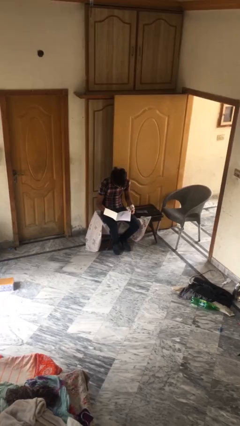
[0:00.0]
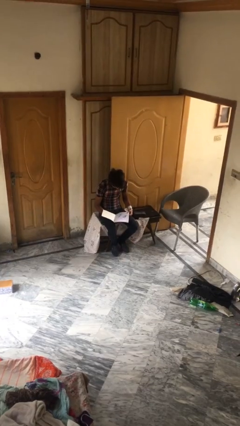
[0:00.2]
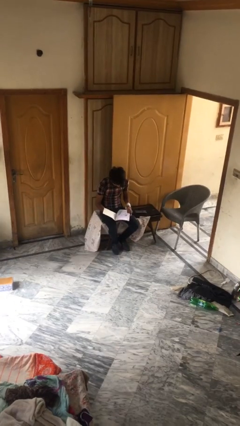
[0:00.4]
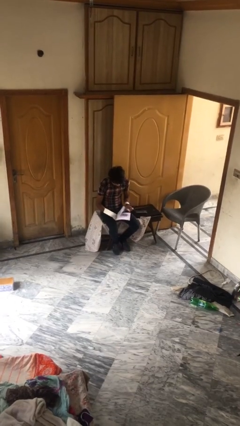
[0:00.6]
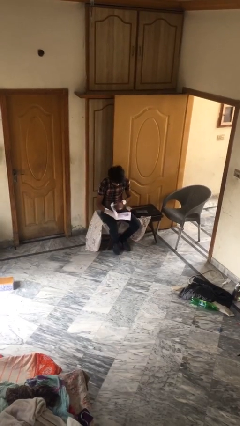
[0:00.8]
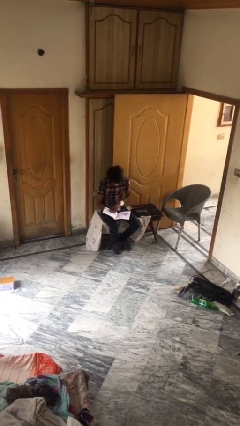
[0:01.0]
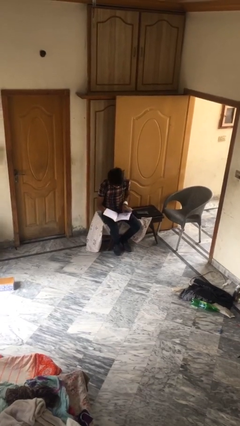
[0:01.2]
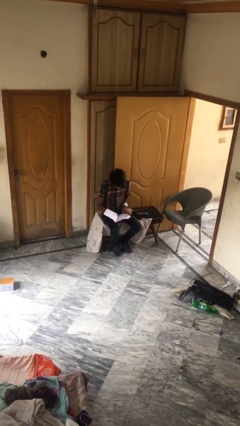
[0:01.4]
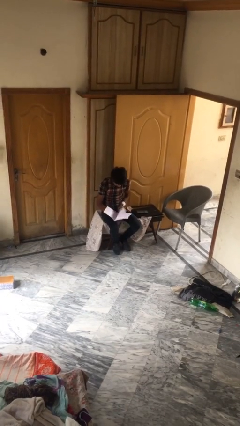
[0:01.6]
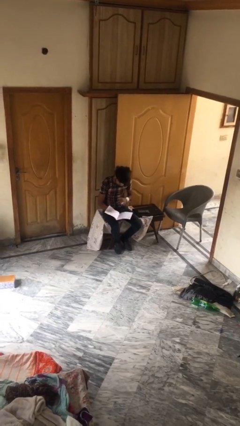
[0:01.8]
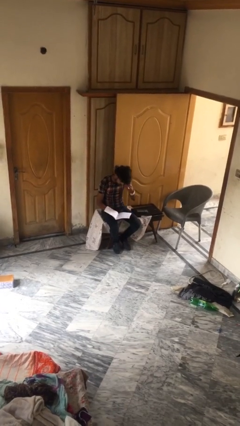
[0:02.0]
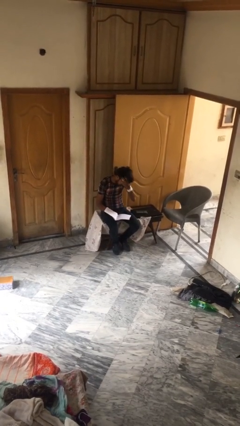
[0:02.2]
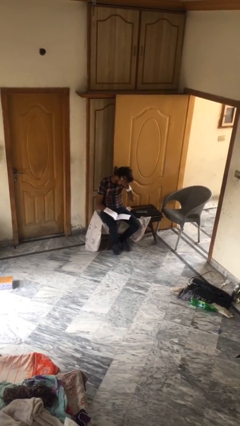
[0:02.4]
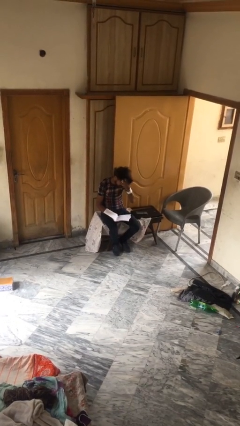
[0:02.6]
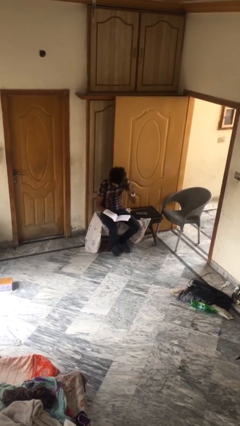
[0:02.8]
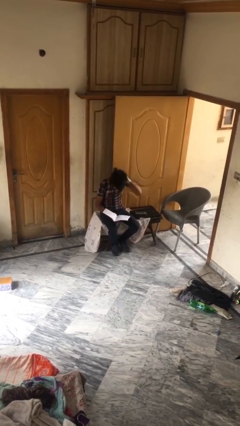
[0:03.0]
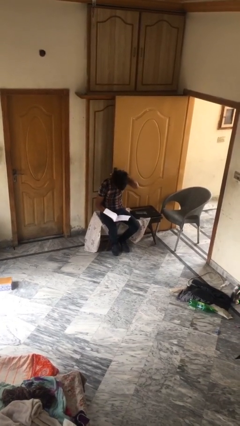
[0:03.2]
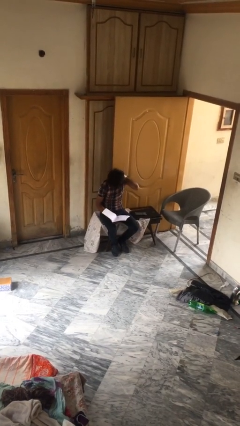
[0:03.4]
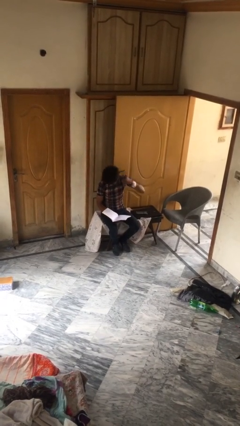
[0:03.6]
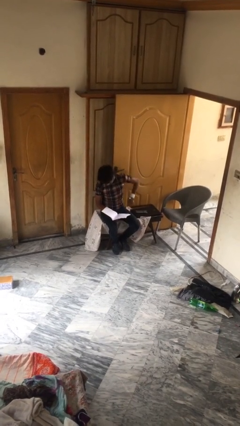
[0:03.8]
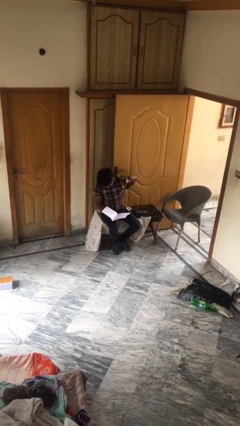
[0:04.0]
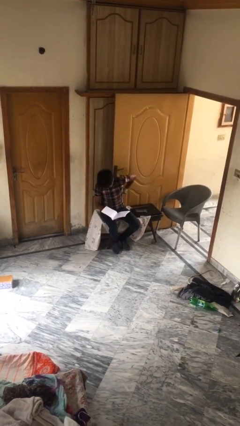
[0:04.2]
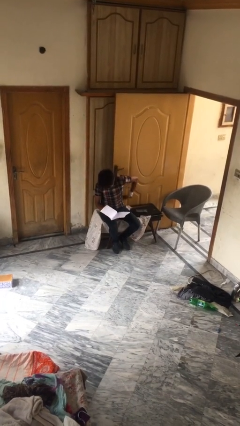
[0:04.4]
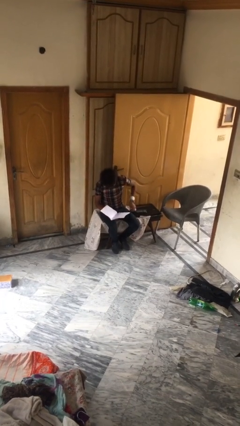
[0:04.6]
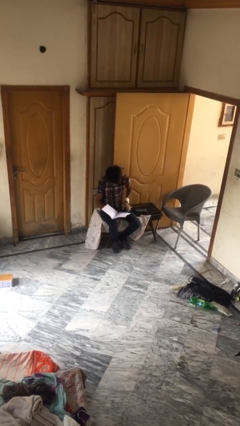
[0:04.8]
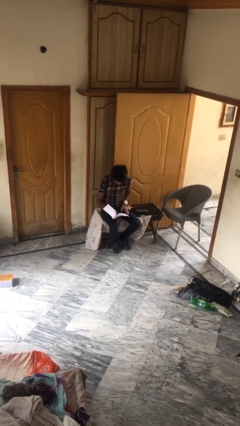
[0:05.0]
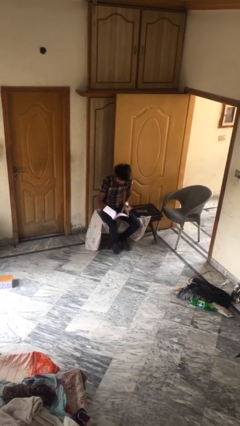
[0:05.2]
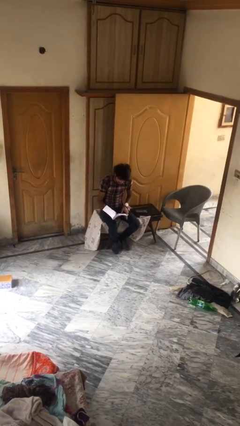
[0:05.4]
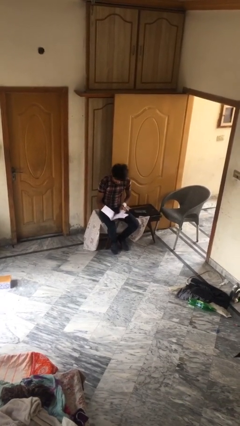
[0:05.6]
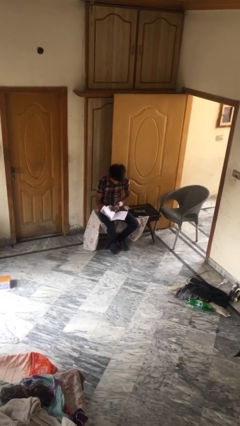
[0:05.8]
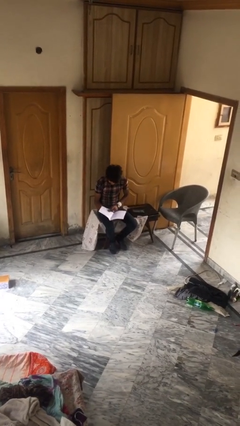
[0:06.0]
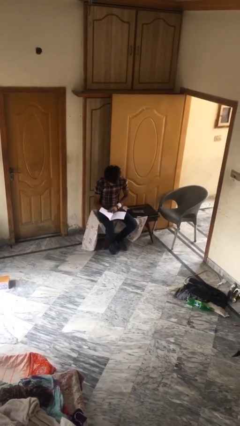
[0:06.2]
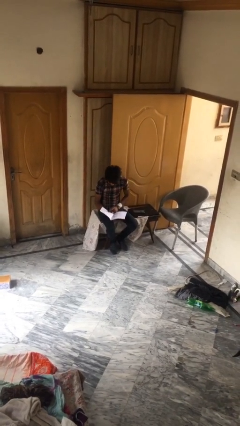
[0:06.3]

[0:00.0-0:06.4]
person reads document

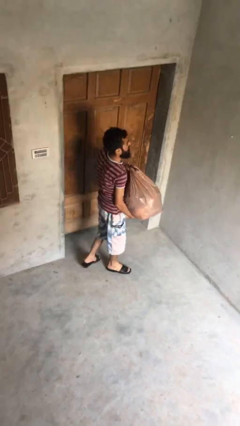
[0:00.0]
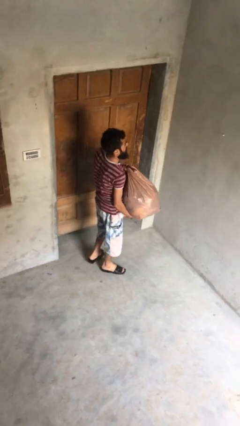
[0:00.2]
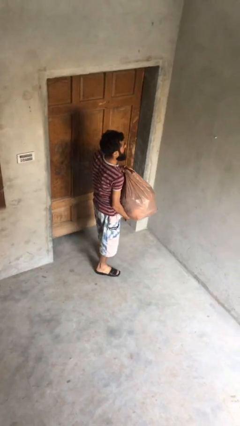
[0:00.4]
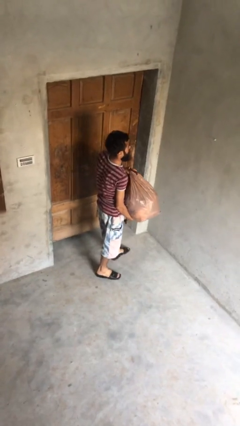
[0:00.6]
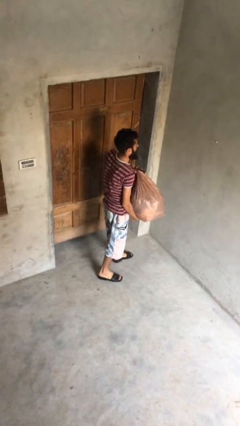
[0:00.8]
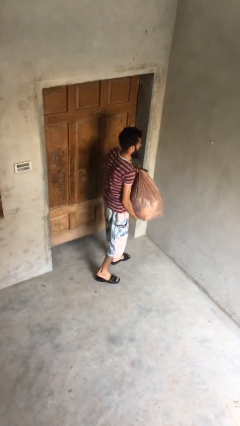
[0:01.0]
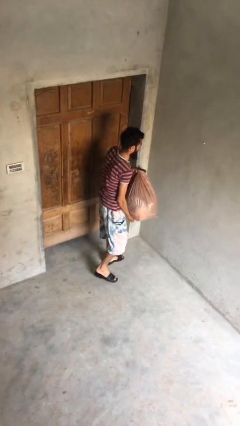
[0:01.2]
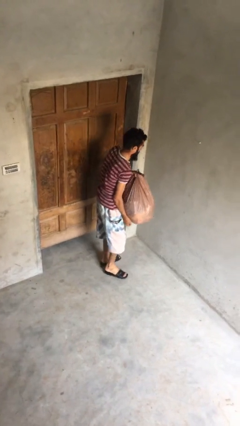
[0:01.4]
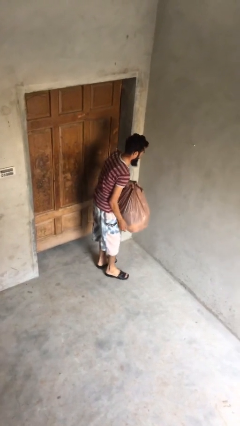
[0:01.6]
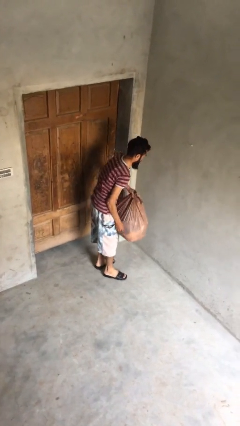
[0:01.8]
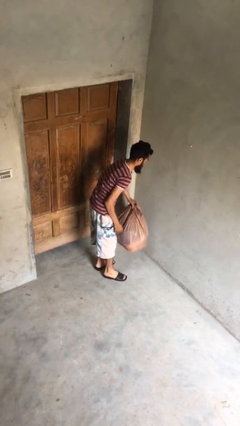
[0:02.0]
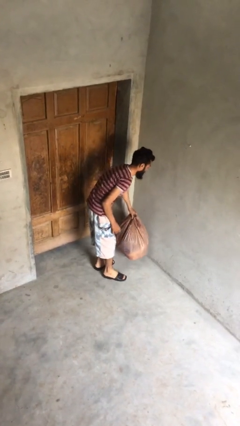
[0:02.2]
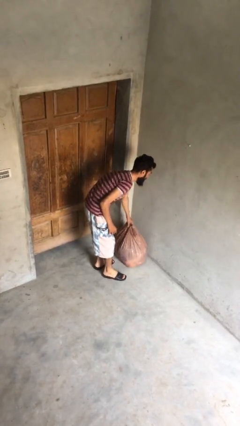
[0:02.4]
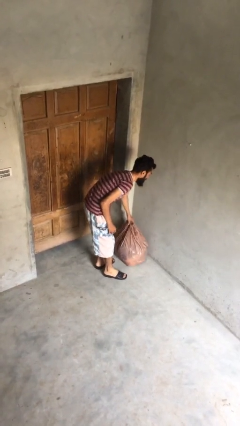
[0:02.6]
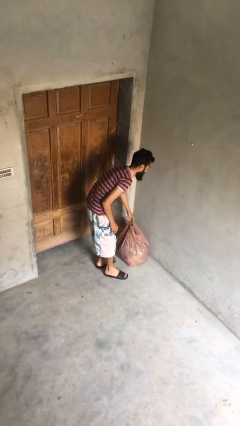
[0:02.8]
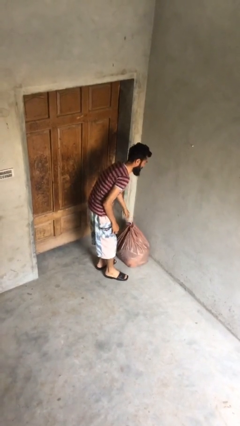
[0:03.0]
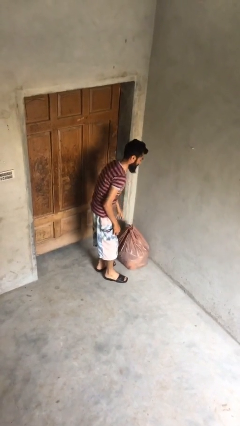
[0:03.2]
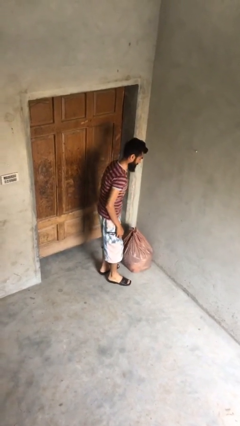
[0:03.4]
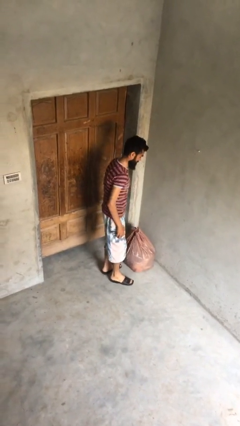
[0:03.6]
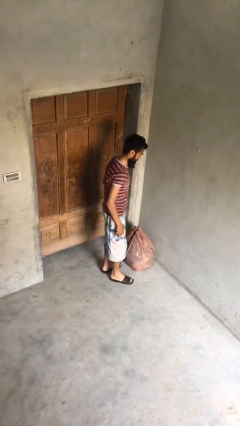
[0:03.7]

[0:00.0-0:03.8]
person puts down object on floor

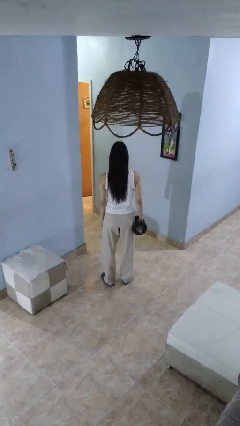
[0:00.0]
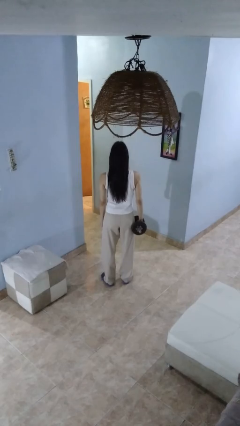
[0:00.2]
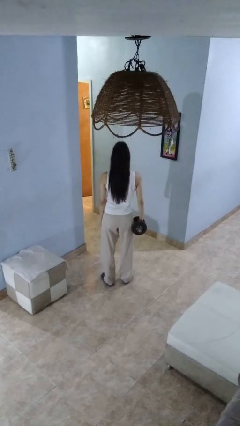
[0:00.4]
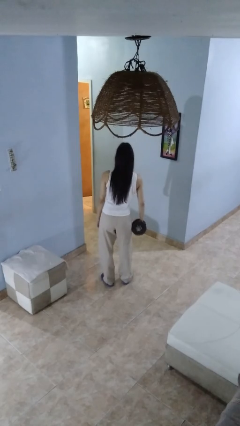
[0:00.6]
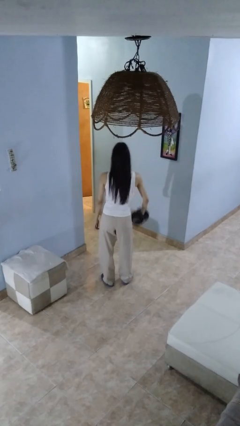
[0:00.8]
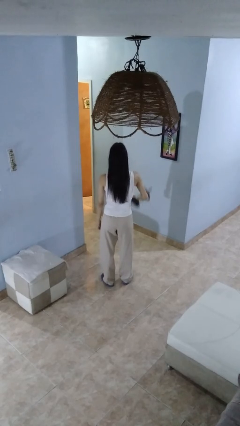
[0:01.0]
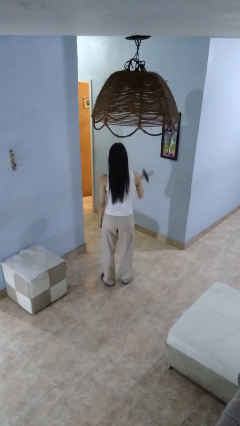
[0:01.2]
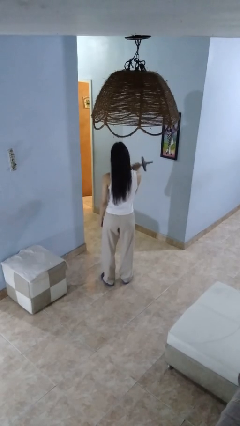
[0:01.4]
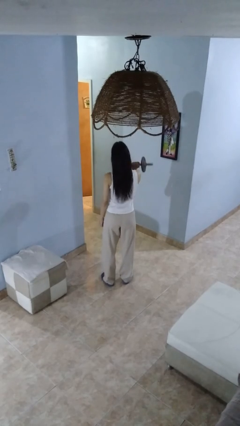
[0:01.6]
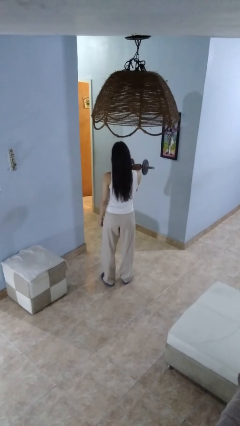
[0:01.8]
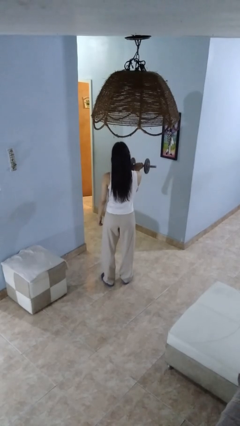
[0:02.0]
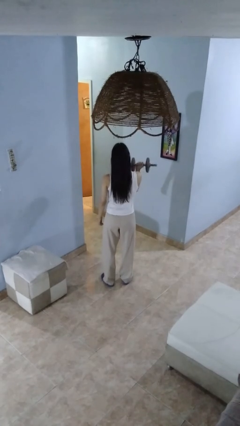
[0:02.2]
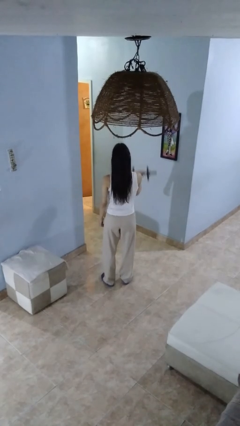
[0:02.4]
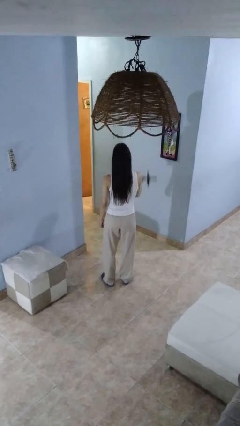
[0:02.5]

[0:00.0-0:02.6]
person lifts dumbbells

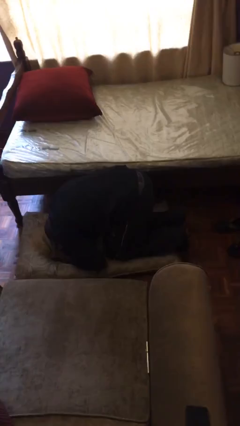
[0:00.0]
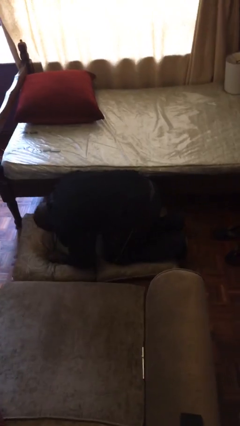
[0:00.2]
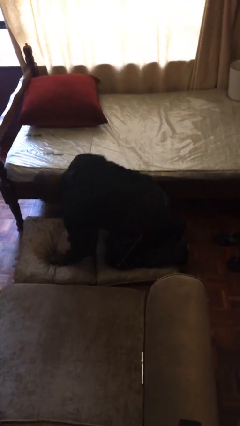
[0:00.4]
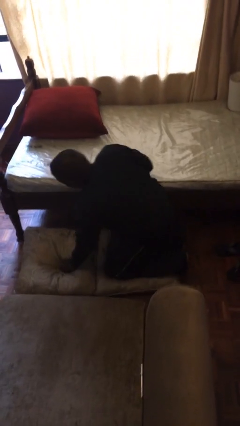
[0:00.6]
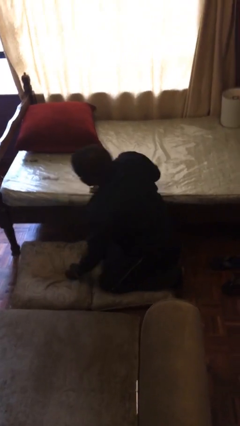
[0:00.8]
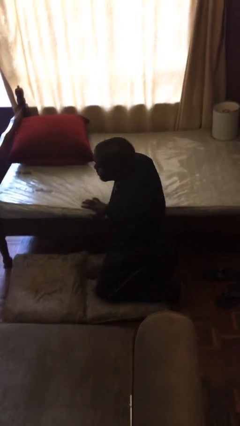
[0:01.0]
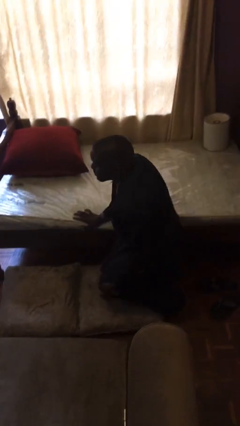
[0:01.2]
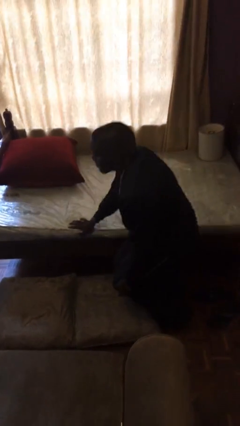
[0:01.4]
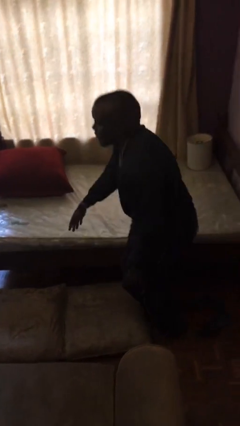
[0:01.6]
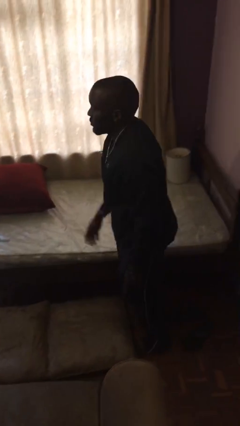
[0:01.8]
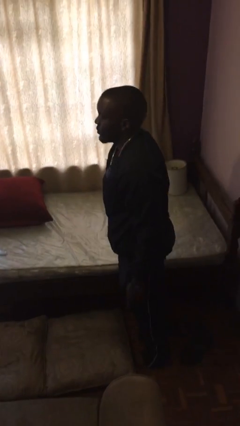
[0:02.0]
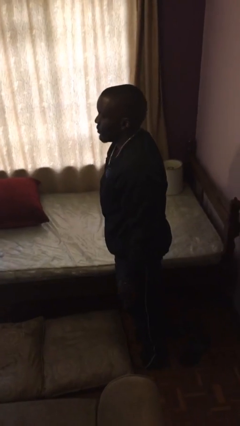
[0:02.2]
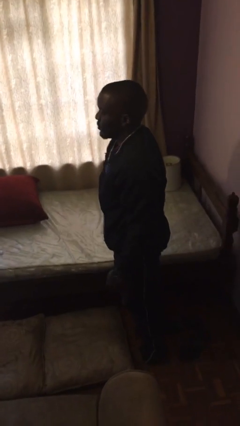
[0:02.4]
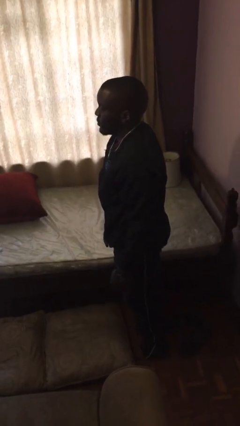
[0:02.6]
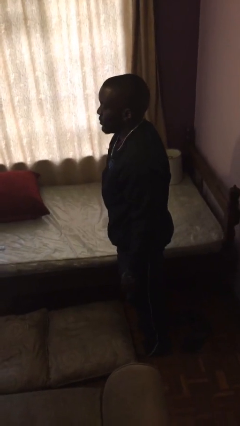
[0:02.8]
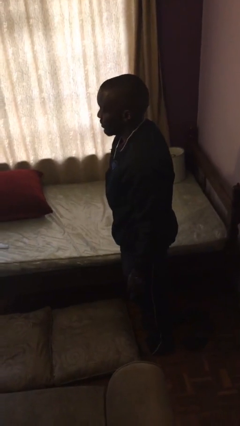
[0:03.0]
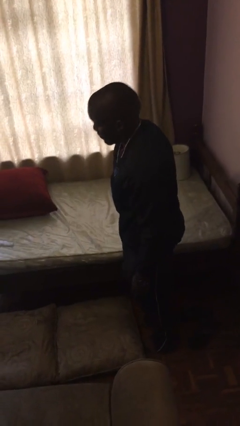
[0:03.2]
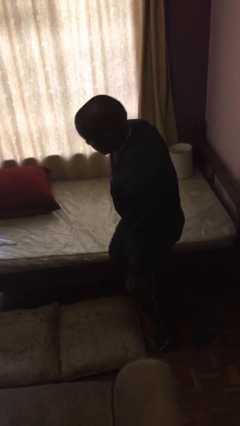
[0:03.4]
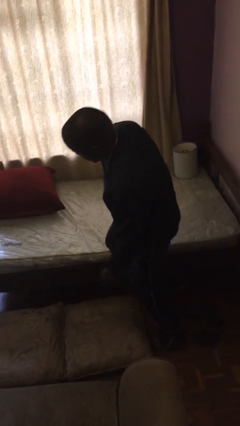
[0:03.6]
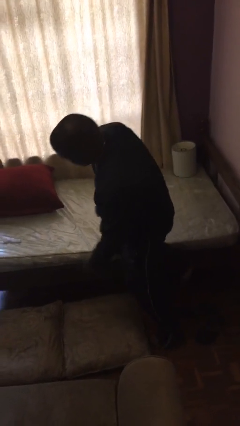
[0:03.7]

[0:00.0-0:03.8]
person stands up from floor

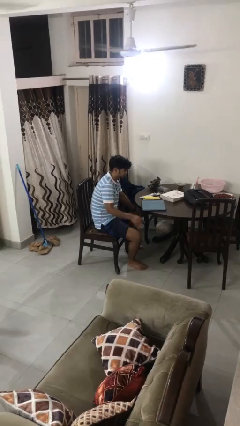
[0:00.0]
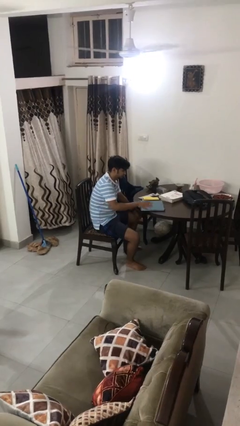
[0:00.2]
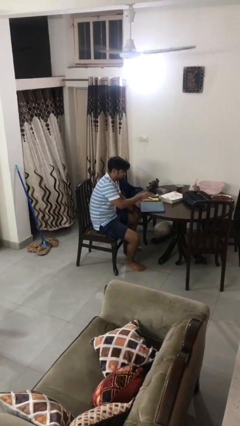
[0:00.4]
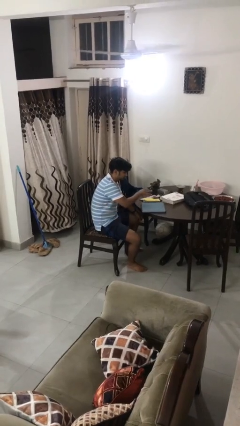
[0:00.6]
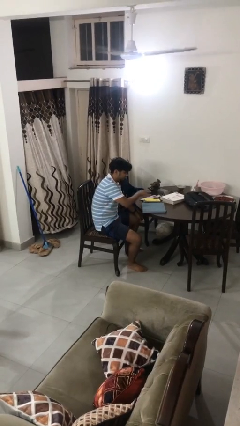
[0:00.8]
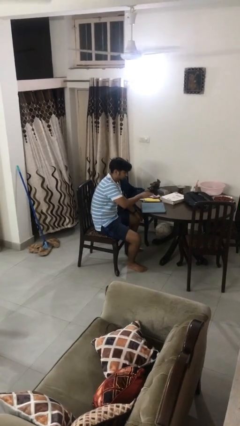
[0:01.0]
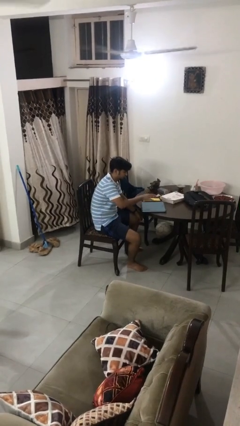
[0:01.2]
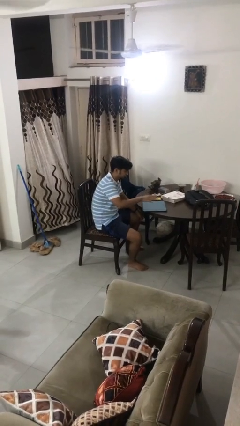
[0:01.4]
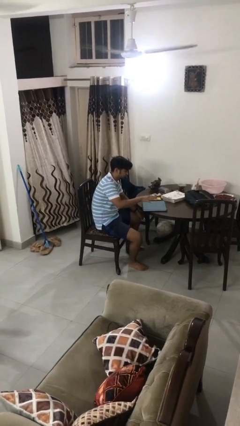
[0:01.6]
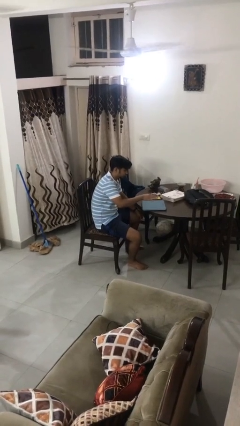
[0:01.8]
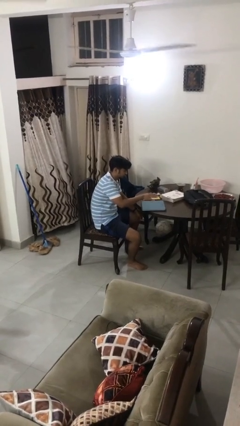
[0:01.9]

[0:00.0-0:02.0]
person waves hand over object
